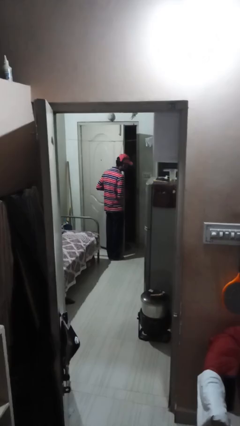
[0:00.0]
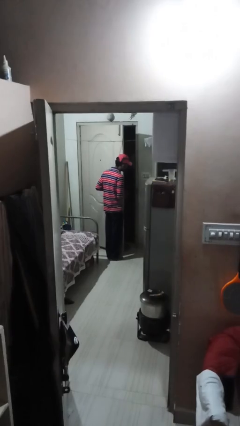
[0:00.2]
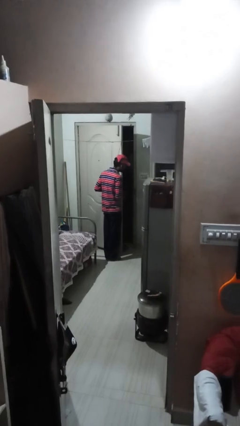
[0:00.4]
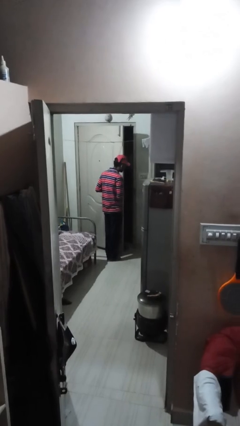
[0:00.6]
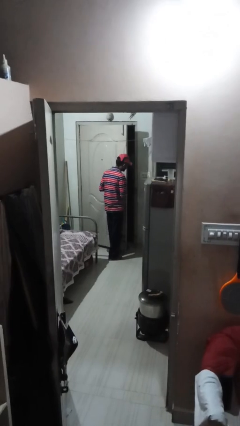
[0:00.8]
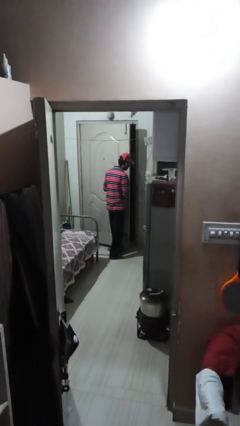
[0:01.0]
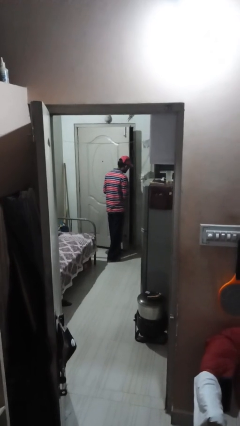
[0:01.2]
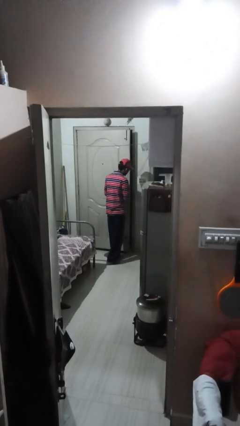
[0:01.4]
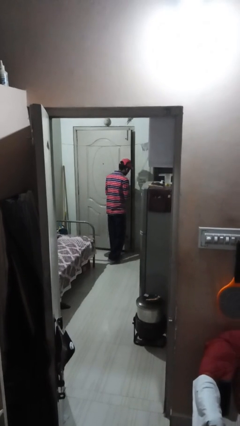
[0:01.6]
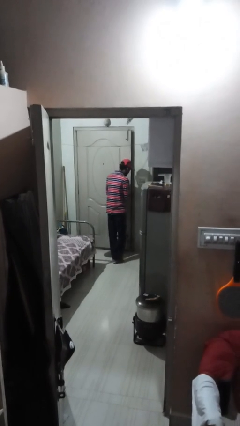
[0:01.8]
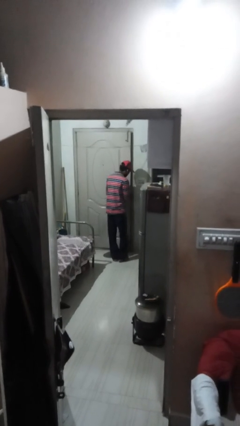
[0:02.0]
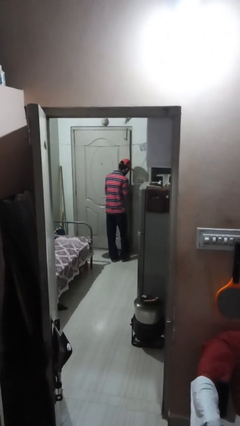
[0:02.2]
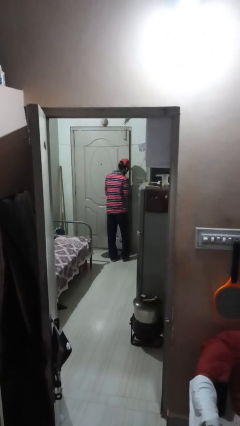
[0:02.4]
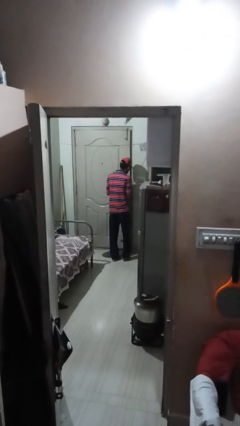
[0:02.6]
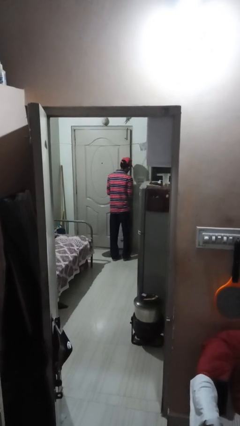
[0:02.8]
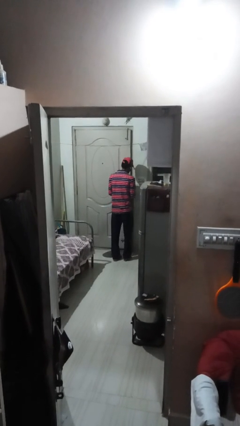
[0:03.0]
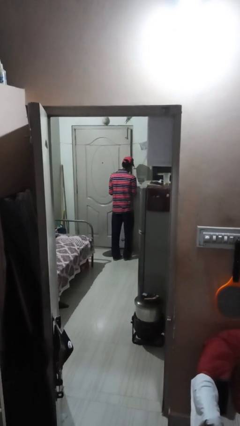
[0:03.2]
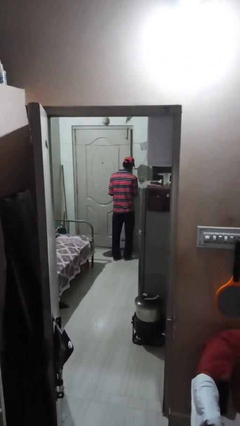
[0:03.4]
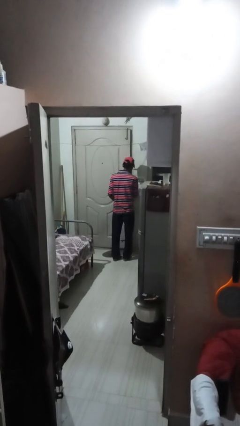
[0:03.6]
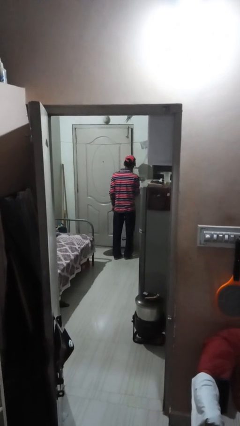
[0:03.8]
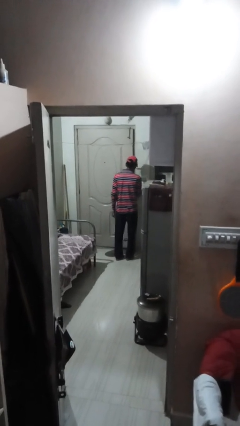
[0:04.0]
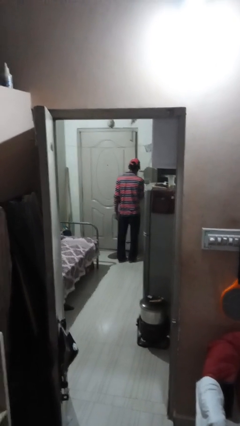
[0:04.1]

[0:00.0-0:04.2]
person closes facility door

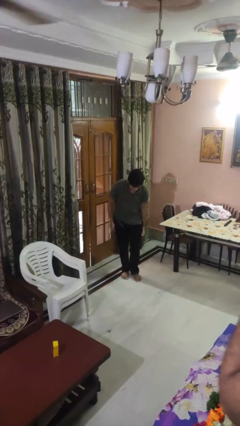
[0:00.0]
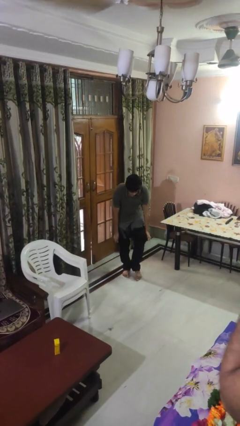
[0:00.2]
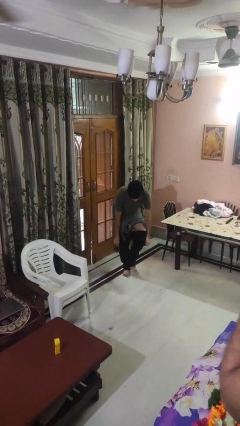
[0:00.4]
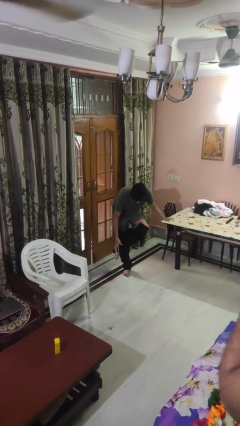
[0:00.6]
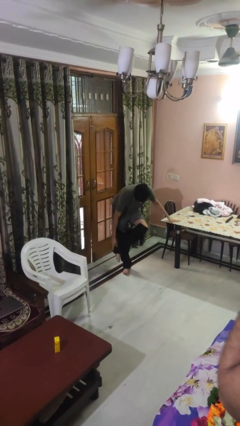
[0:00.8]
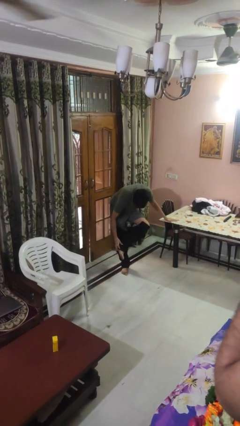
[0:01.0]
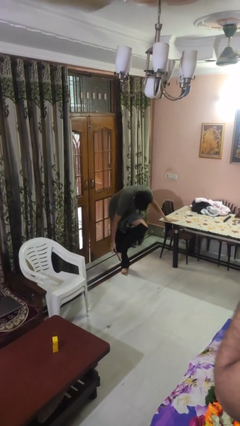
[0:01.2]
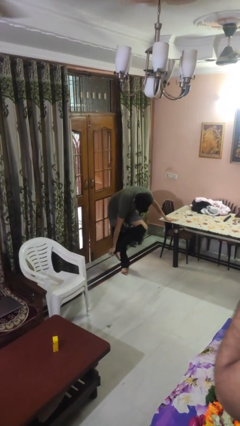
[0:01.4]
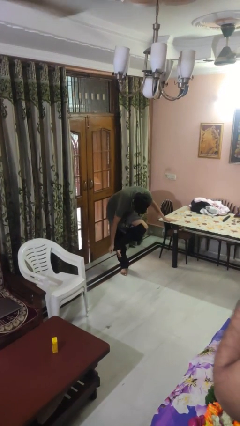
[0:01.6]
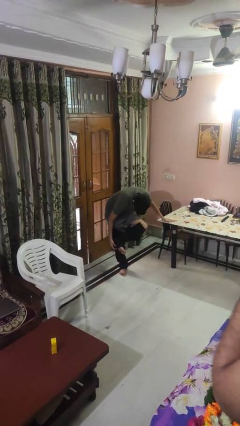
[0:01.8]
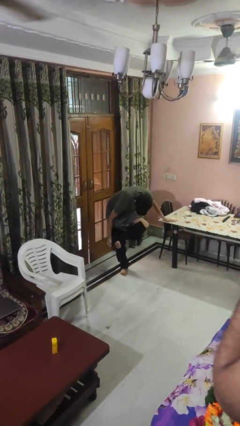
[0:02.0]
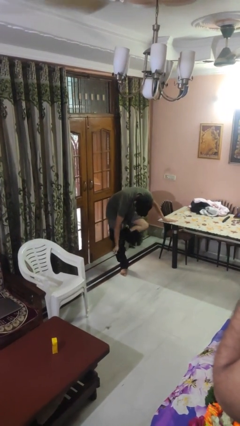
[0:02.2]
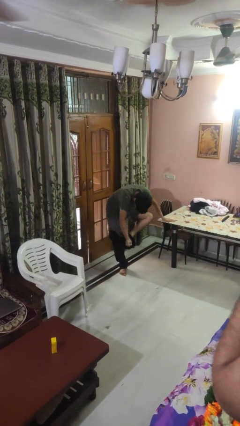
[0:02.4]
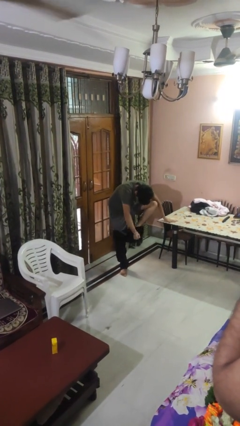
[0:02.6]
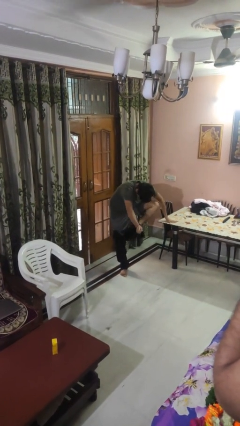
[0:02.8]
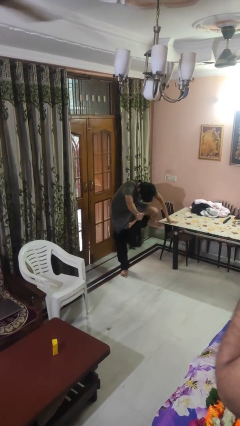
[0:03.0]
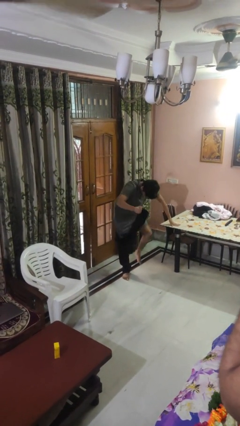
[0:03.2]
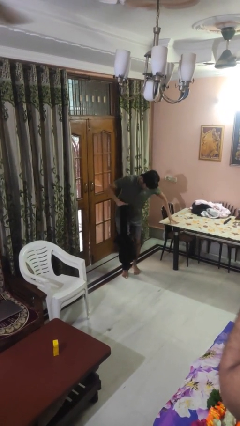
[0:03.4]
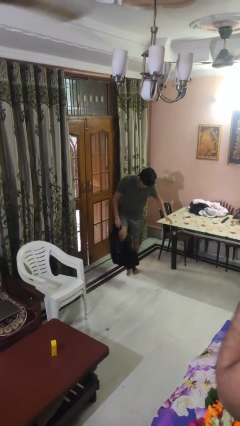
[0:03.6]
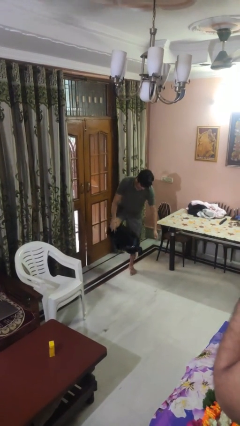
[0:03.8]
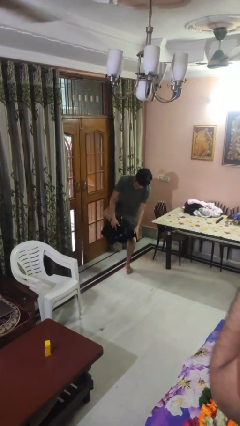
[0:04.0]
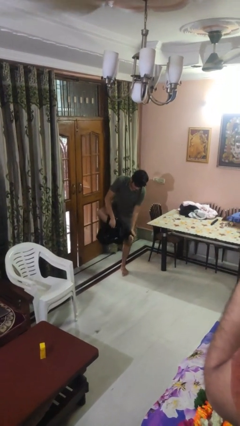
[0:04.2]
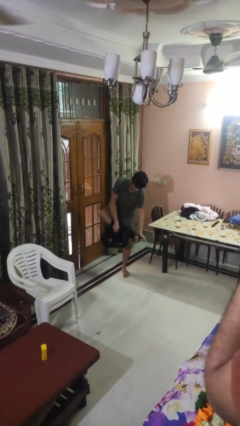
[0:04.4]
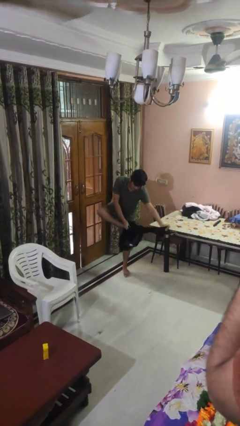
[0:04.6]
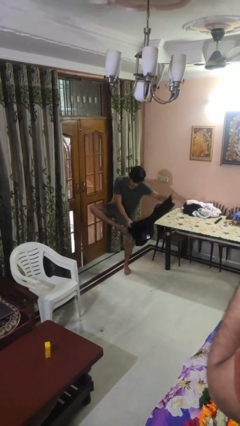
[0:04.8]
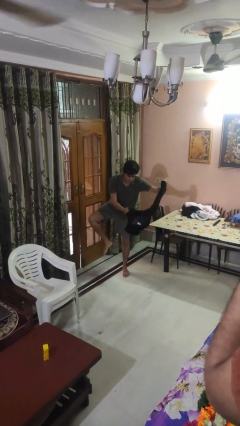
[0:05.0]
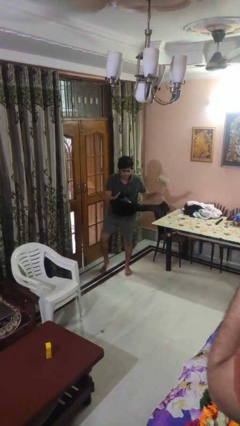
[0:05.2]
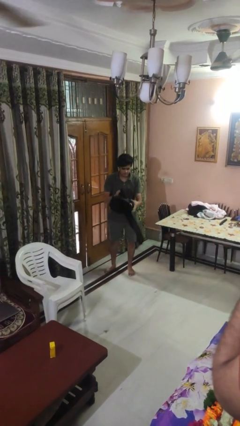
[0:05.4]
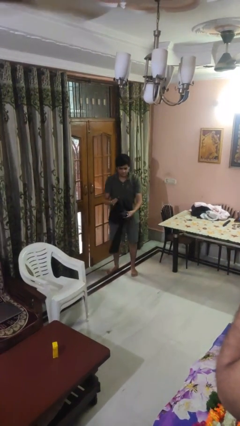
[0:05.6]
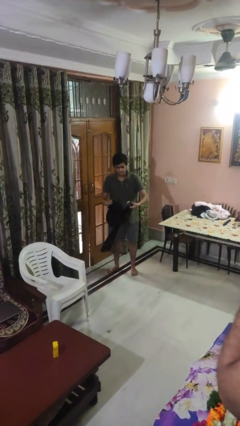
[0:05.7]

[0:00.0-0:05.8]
person takes off pants

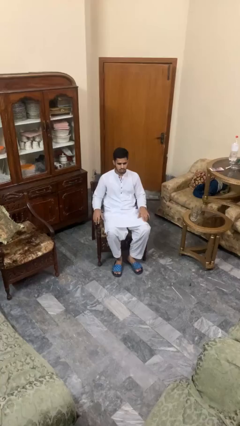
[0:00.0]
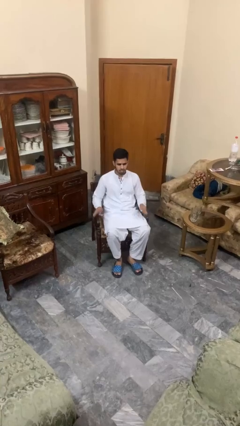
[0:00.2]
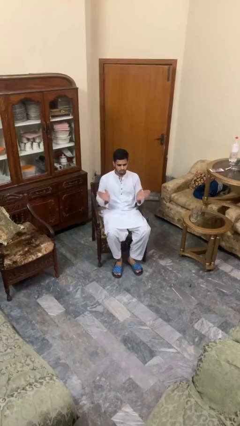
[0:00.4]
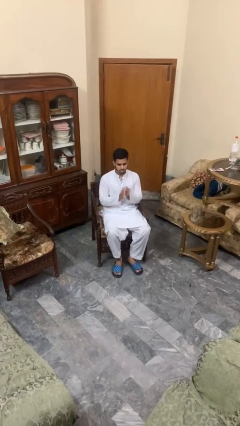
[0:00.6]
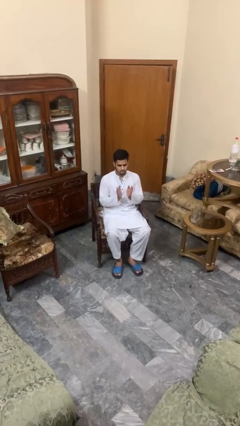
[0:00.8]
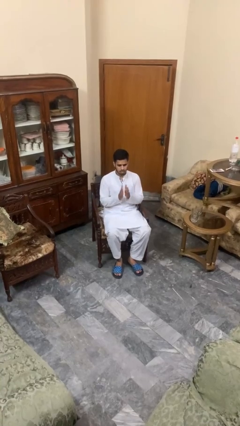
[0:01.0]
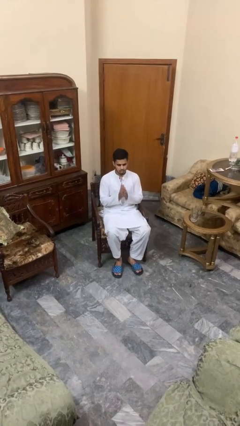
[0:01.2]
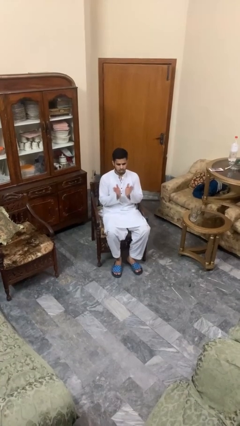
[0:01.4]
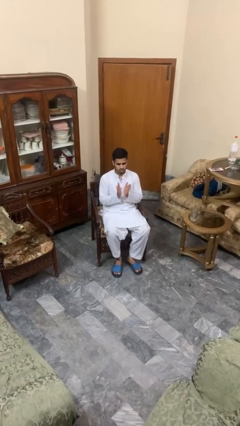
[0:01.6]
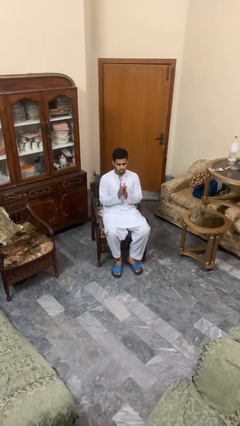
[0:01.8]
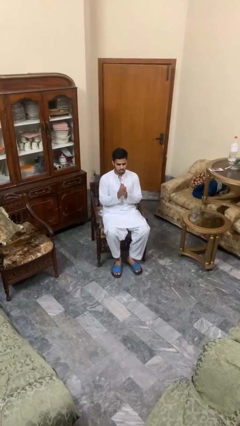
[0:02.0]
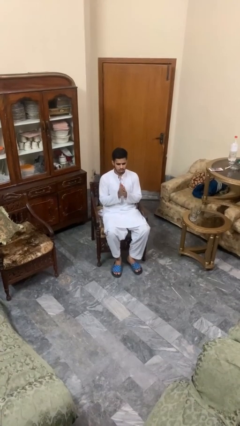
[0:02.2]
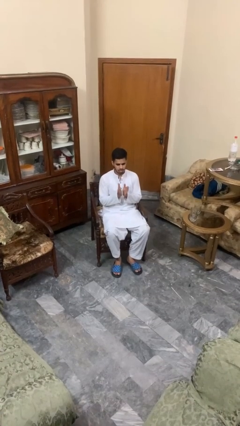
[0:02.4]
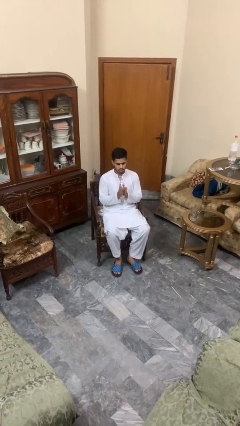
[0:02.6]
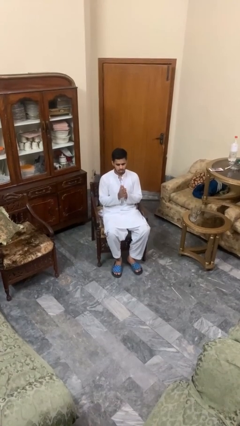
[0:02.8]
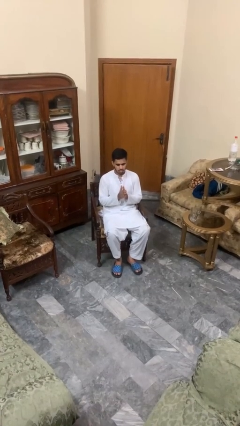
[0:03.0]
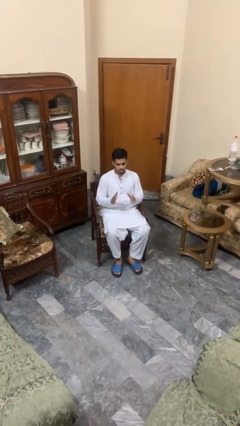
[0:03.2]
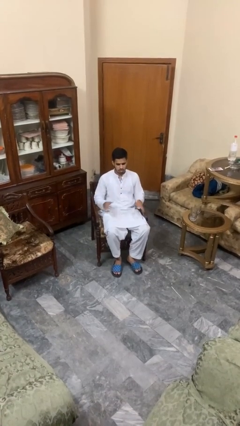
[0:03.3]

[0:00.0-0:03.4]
person claps hands

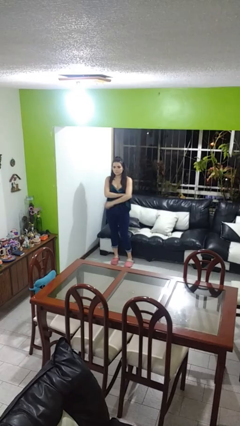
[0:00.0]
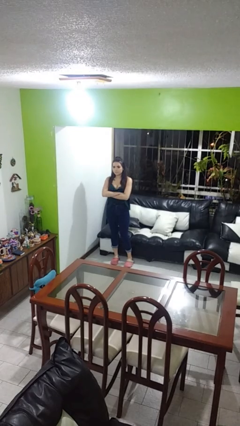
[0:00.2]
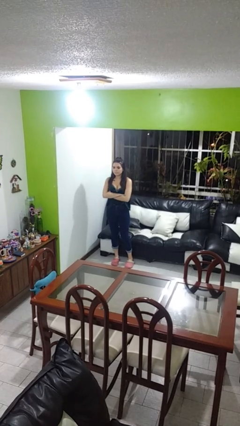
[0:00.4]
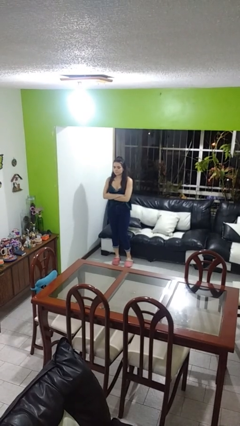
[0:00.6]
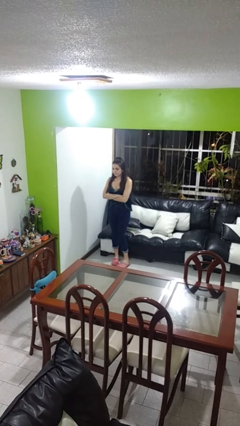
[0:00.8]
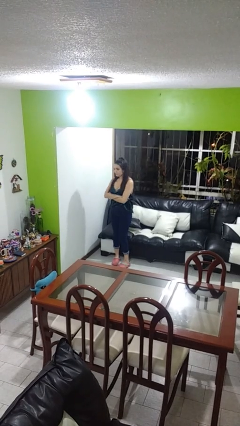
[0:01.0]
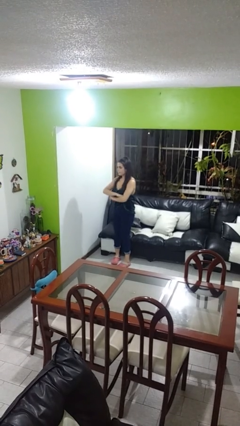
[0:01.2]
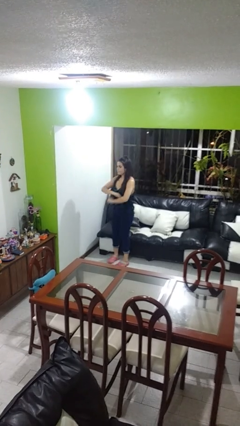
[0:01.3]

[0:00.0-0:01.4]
person crosses arms

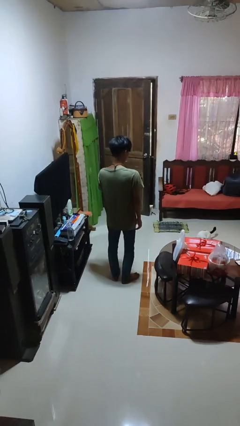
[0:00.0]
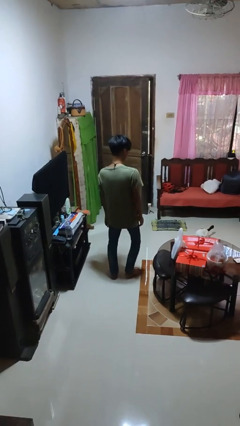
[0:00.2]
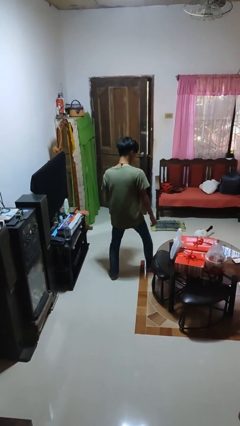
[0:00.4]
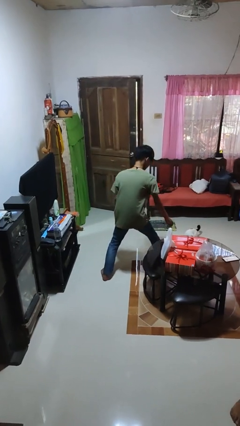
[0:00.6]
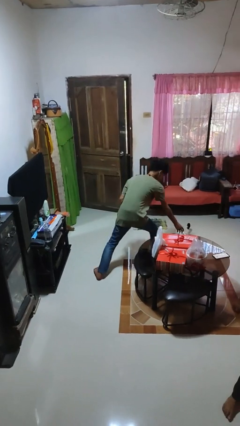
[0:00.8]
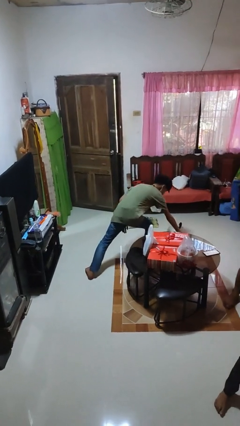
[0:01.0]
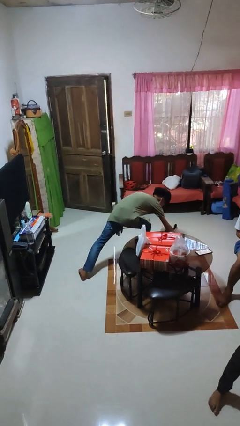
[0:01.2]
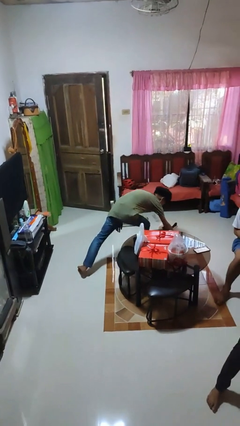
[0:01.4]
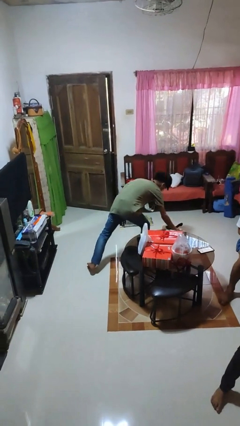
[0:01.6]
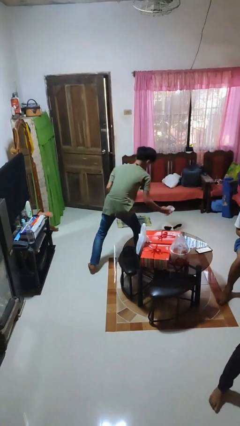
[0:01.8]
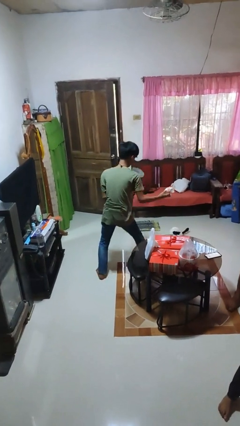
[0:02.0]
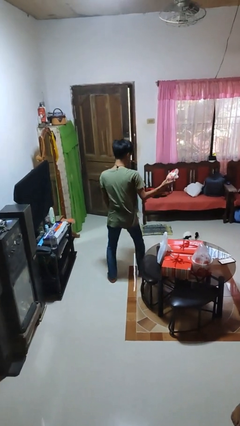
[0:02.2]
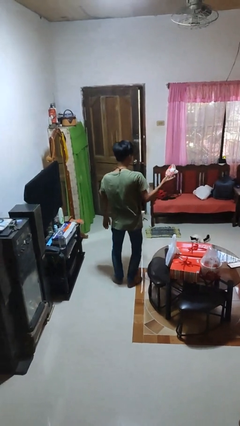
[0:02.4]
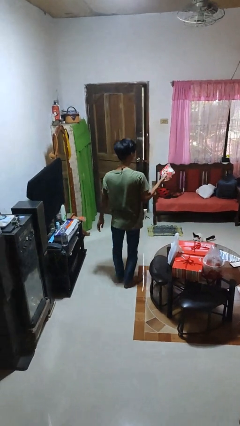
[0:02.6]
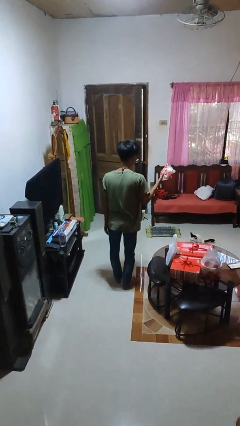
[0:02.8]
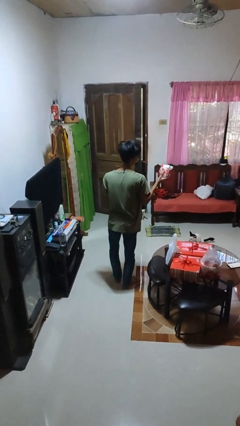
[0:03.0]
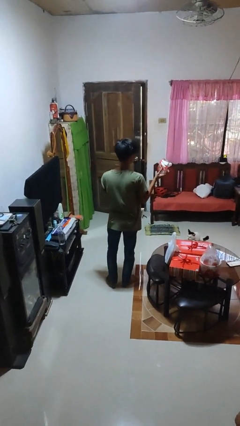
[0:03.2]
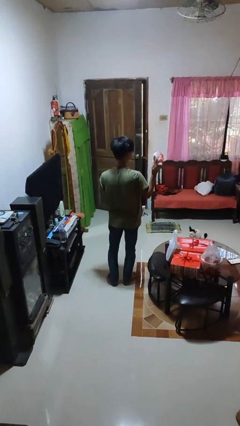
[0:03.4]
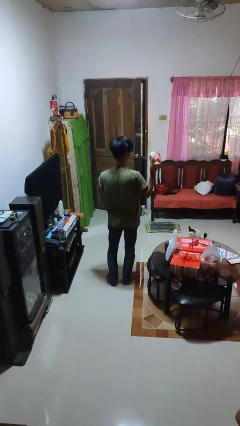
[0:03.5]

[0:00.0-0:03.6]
person picks up object from floor
